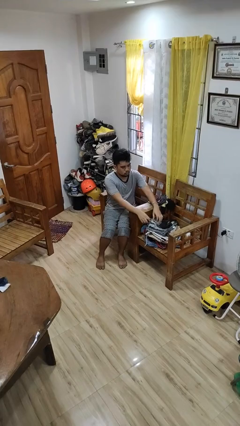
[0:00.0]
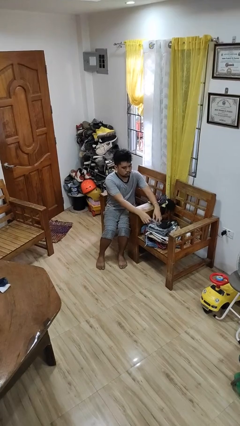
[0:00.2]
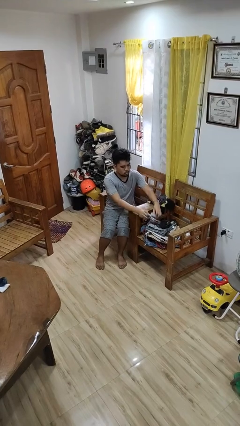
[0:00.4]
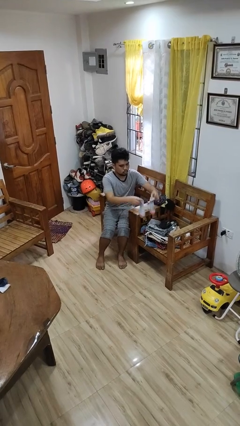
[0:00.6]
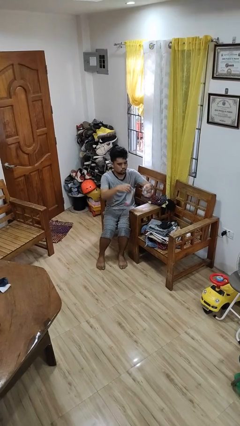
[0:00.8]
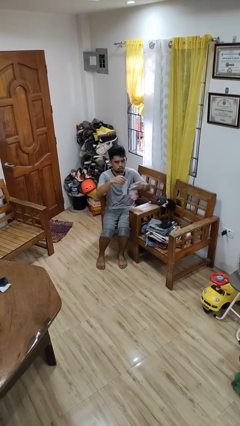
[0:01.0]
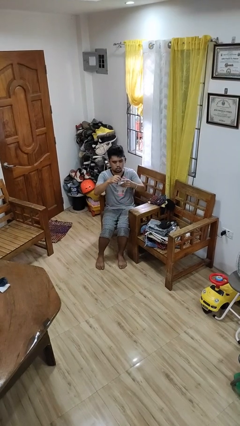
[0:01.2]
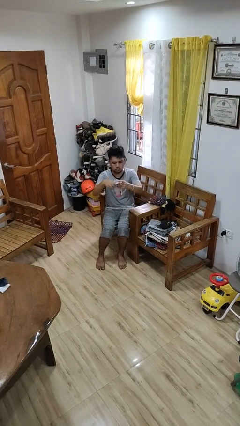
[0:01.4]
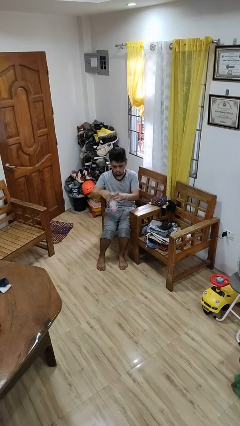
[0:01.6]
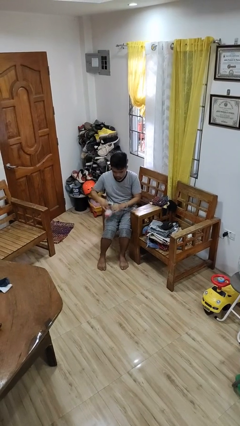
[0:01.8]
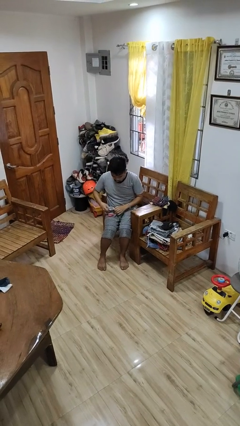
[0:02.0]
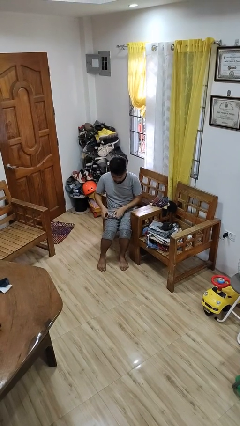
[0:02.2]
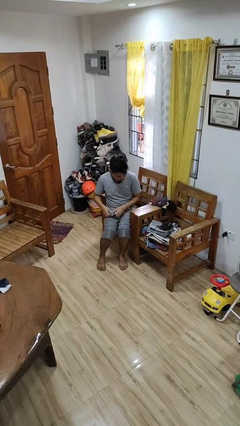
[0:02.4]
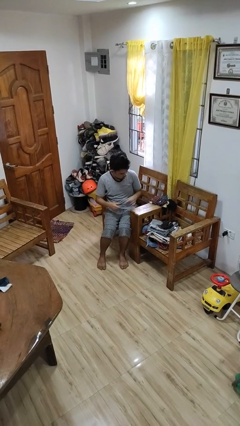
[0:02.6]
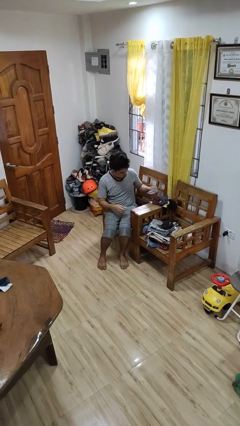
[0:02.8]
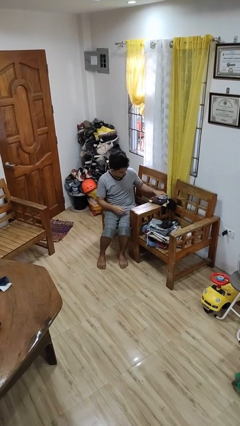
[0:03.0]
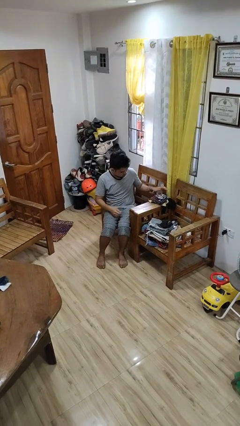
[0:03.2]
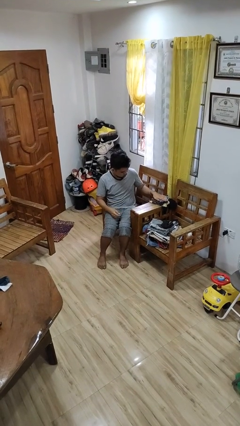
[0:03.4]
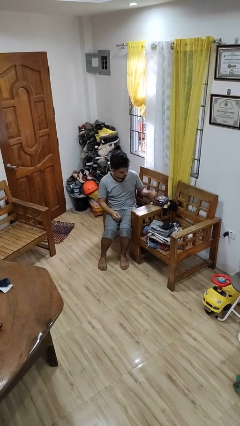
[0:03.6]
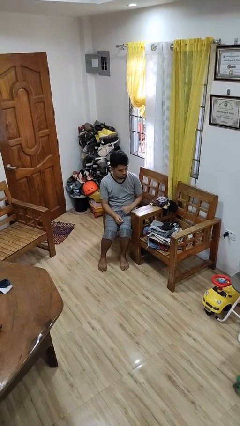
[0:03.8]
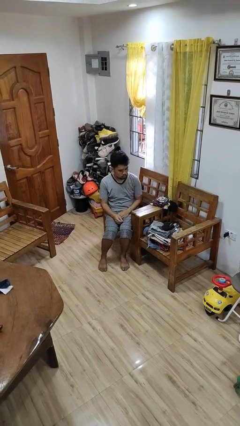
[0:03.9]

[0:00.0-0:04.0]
person folds socks

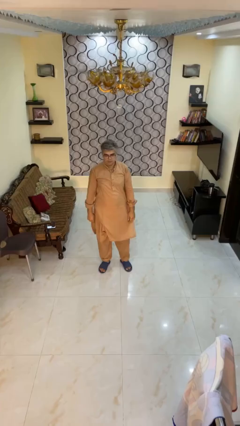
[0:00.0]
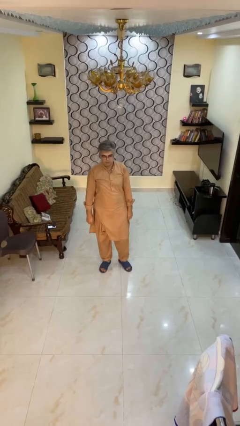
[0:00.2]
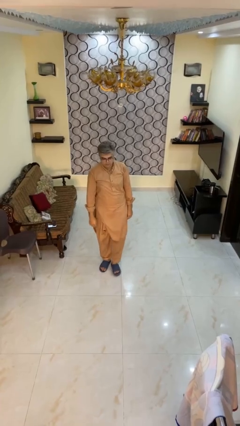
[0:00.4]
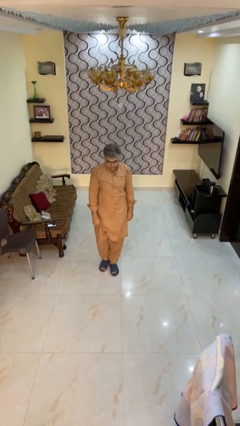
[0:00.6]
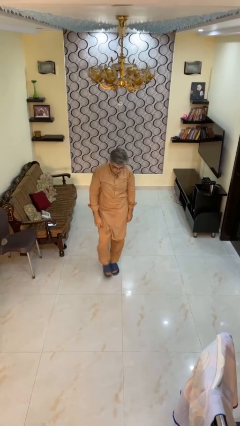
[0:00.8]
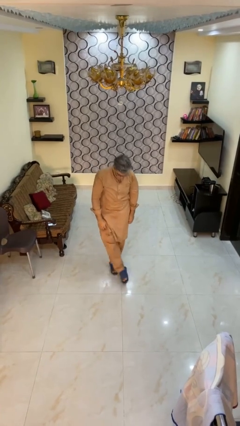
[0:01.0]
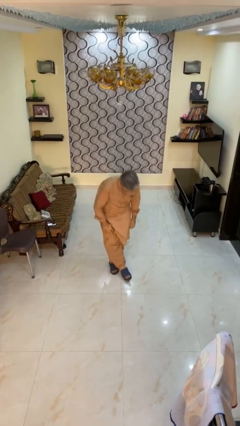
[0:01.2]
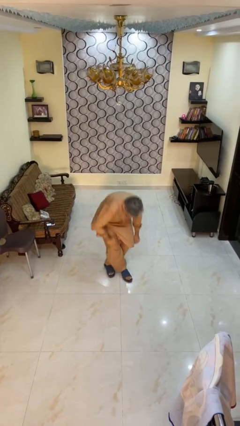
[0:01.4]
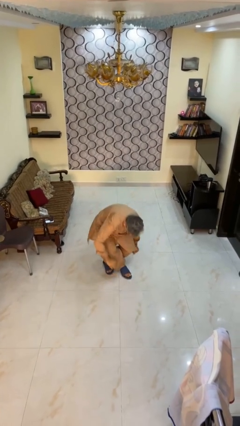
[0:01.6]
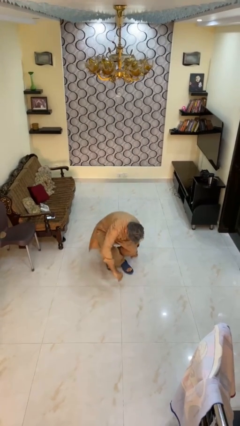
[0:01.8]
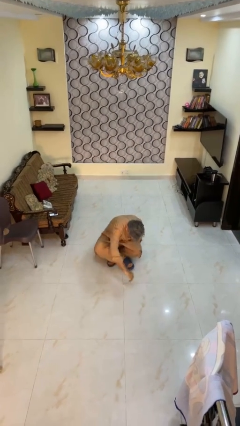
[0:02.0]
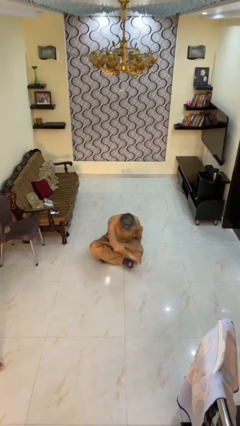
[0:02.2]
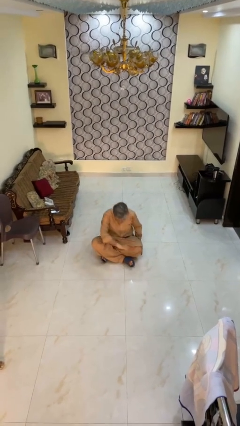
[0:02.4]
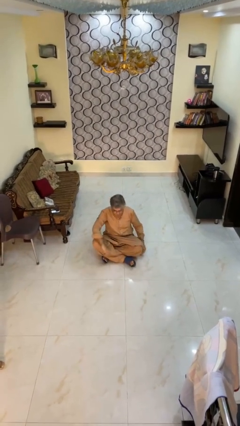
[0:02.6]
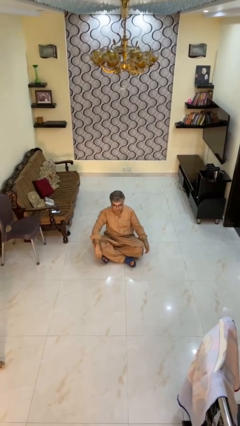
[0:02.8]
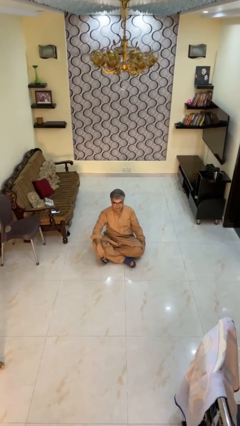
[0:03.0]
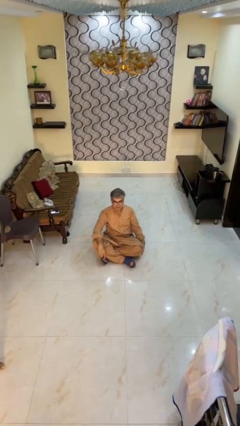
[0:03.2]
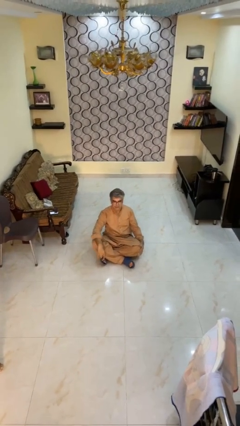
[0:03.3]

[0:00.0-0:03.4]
person sits crisscross

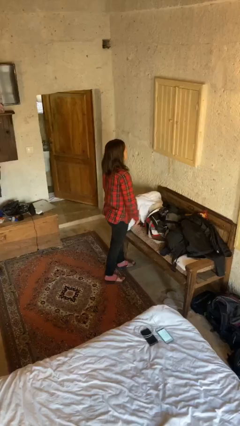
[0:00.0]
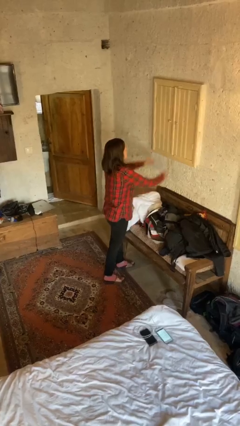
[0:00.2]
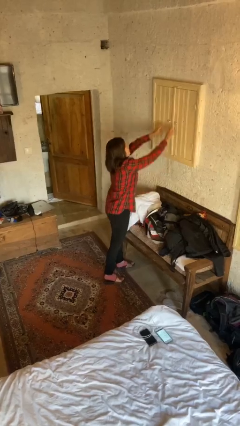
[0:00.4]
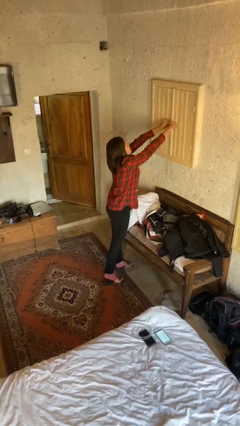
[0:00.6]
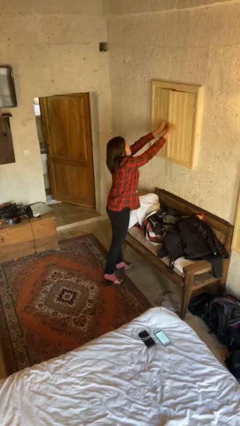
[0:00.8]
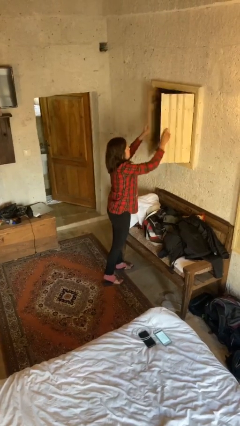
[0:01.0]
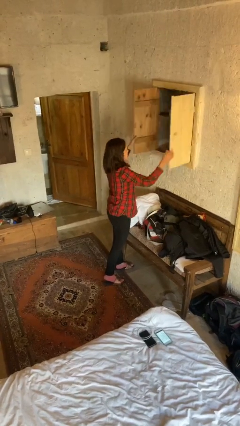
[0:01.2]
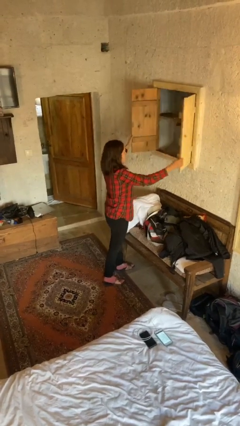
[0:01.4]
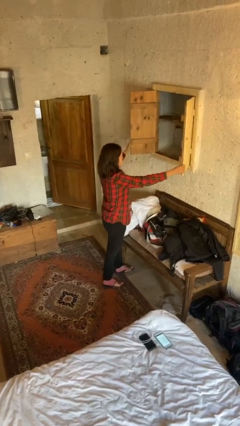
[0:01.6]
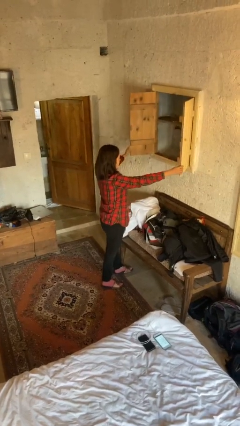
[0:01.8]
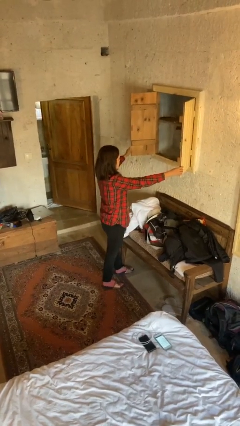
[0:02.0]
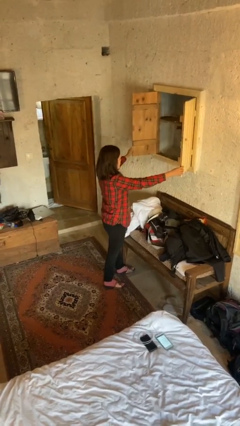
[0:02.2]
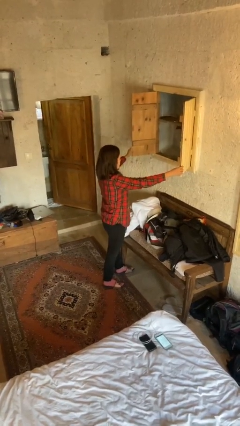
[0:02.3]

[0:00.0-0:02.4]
person opens closet door

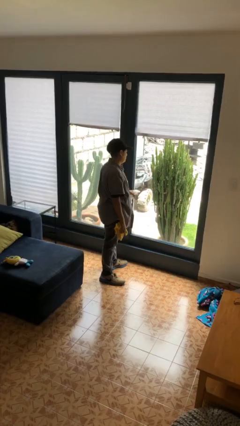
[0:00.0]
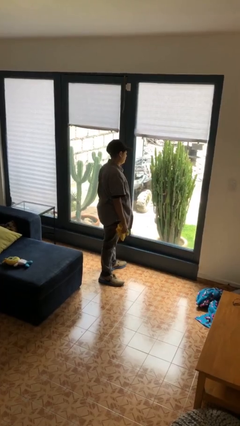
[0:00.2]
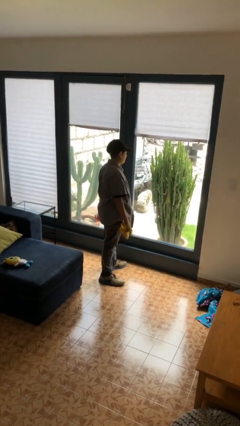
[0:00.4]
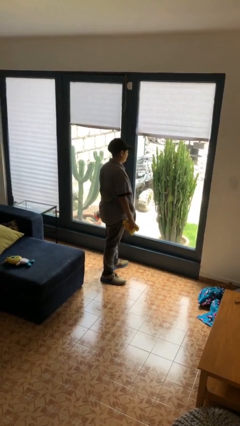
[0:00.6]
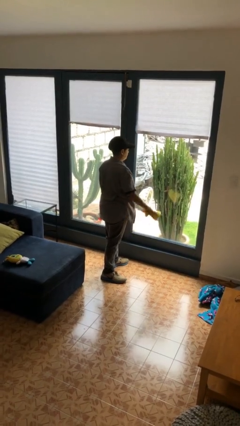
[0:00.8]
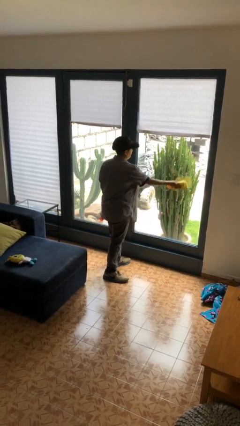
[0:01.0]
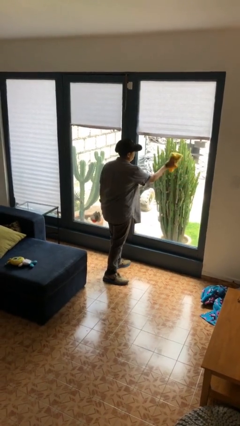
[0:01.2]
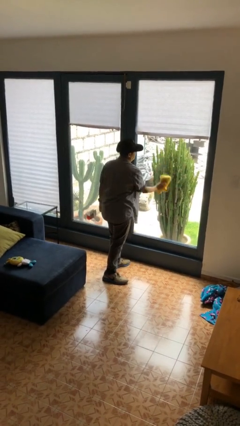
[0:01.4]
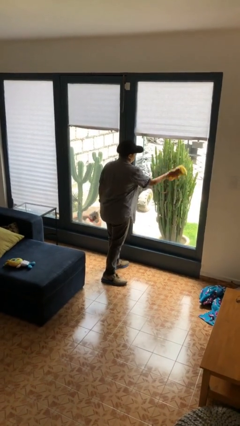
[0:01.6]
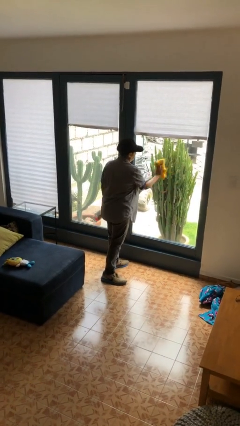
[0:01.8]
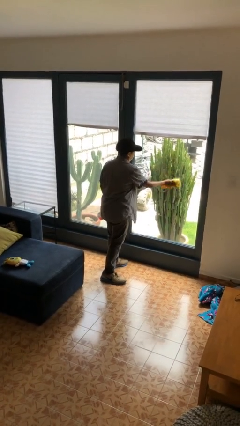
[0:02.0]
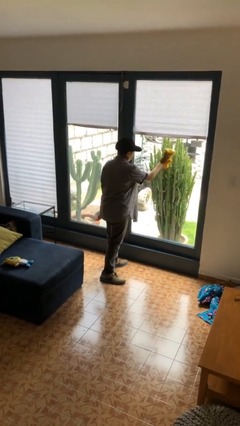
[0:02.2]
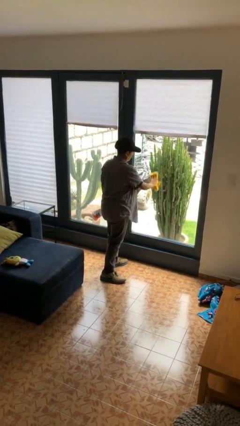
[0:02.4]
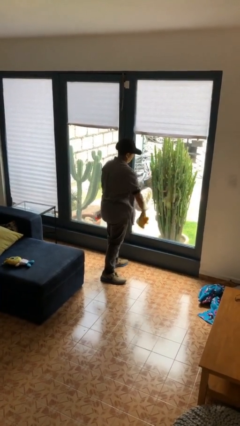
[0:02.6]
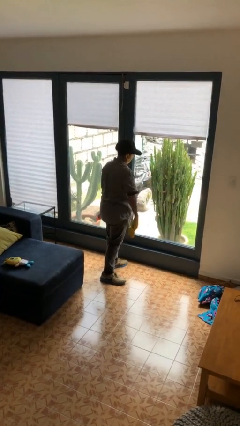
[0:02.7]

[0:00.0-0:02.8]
person washes window

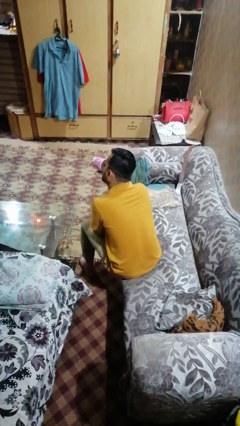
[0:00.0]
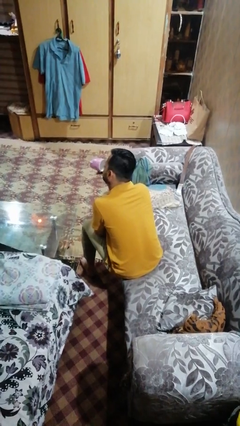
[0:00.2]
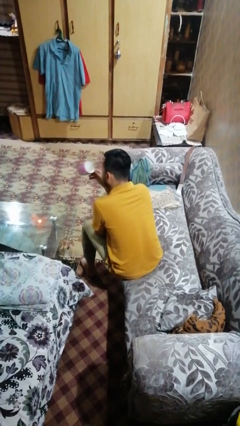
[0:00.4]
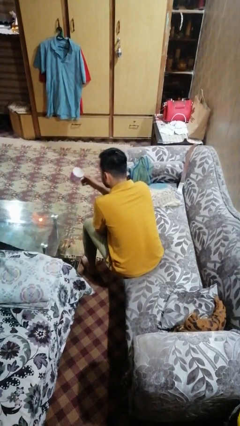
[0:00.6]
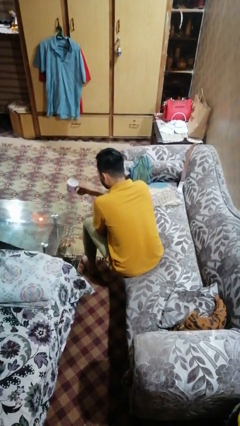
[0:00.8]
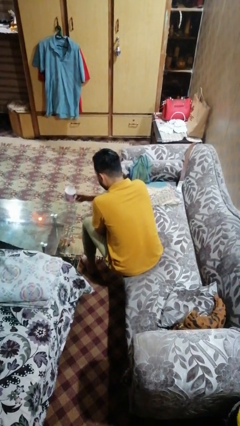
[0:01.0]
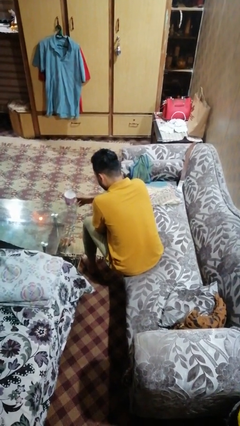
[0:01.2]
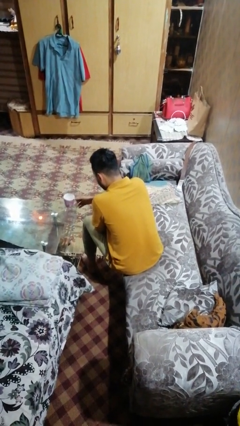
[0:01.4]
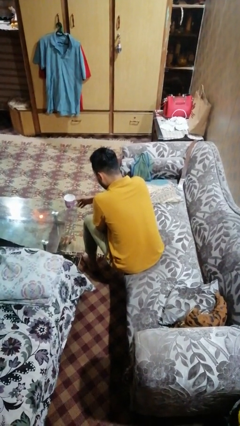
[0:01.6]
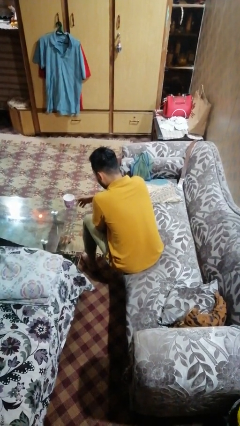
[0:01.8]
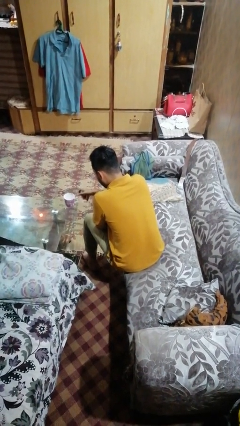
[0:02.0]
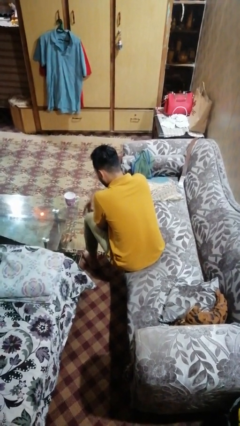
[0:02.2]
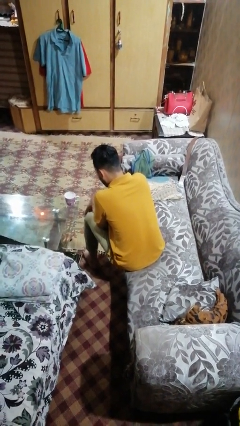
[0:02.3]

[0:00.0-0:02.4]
person puts down object on table

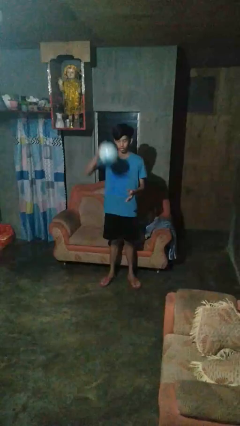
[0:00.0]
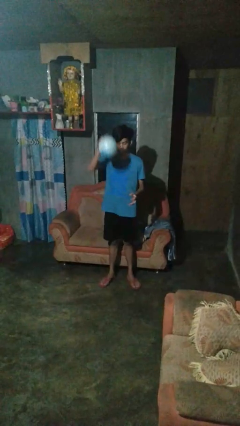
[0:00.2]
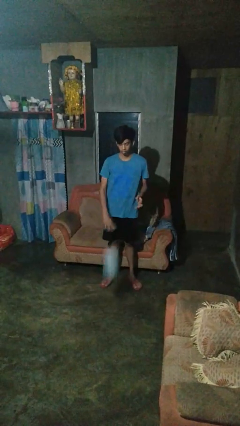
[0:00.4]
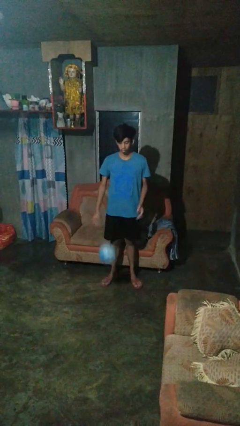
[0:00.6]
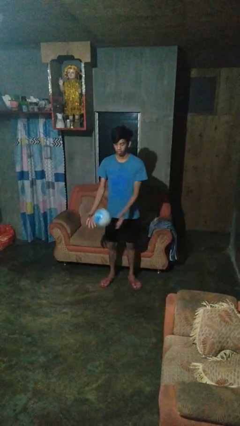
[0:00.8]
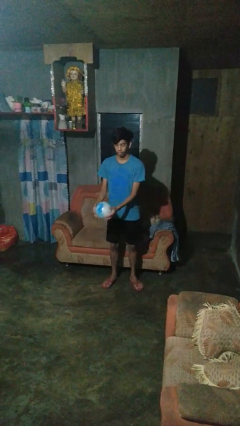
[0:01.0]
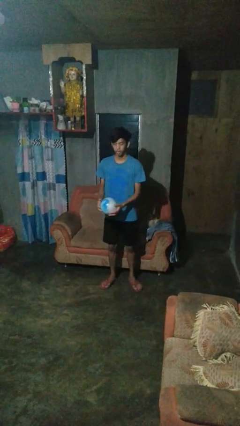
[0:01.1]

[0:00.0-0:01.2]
person bounces ball on floor

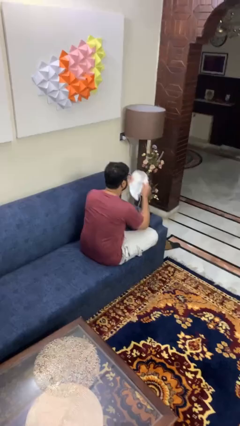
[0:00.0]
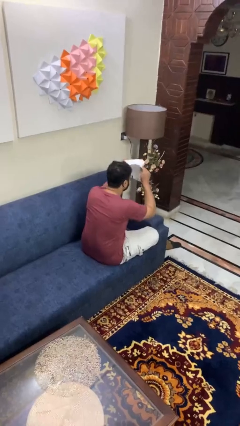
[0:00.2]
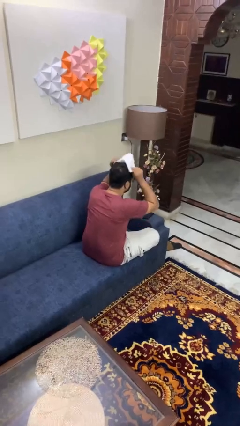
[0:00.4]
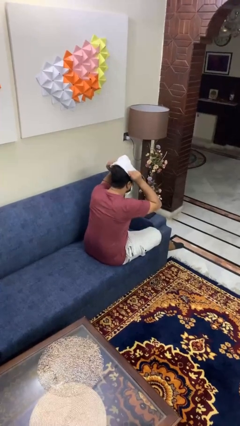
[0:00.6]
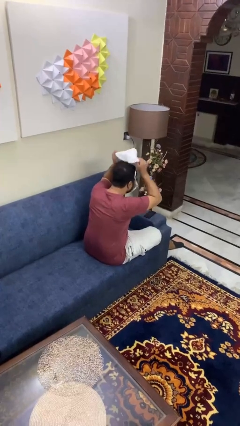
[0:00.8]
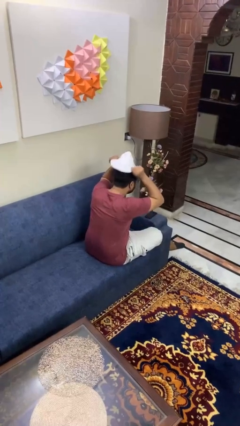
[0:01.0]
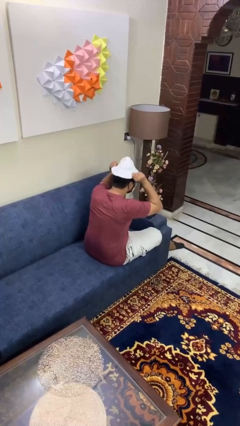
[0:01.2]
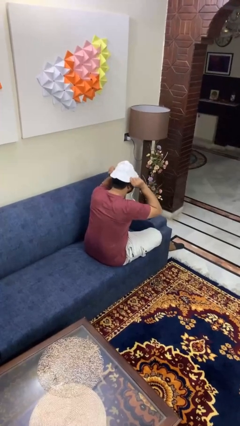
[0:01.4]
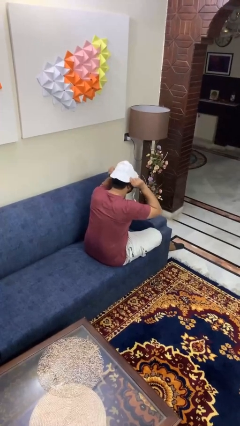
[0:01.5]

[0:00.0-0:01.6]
person puts on hat
